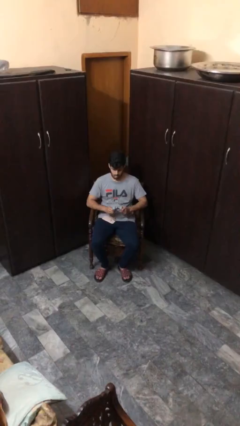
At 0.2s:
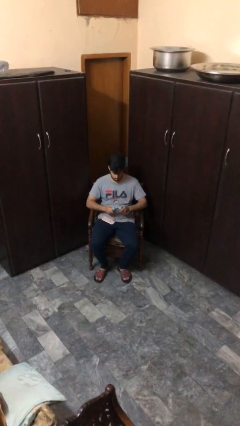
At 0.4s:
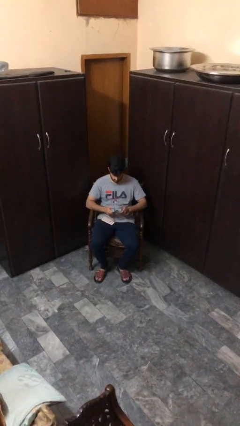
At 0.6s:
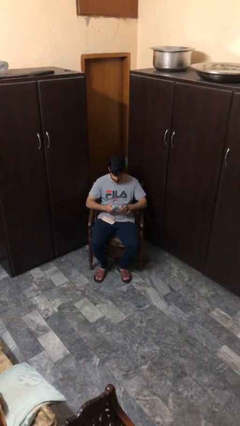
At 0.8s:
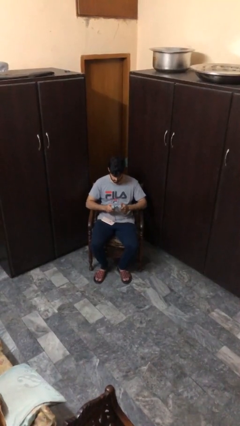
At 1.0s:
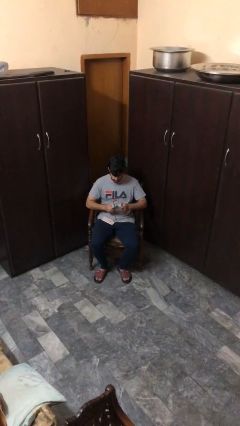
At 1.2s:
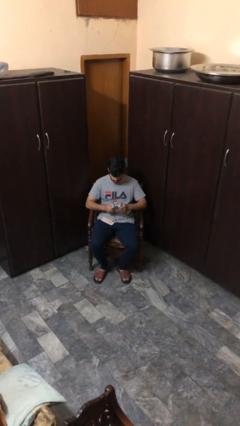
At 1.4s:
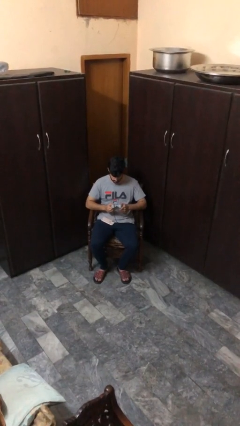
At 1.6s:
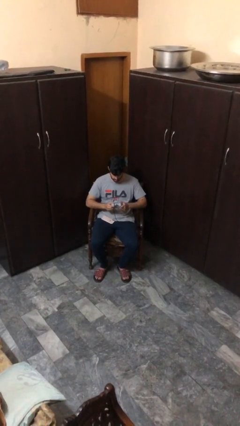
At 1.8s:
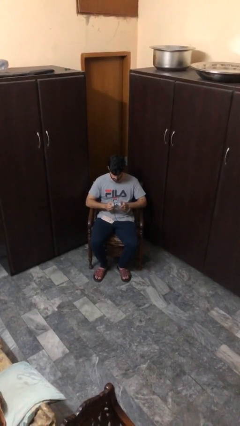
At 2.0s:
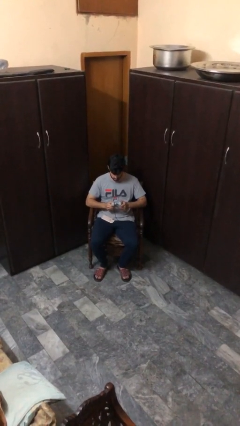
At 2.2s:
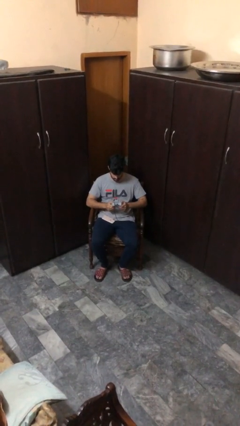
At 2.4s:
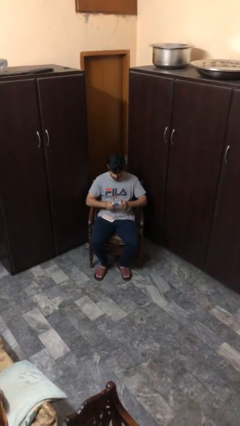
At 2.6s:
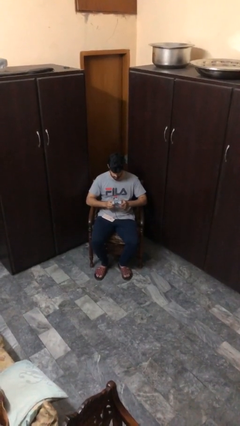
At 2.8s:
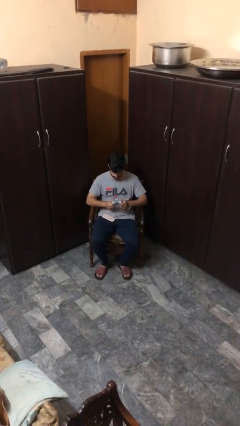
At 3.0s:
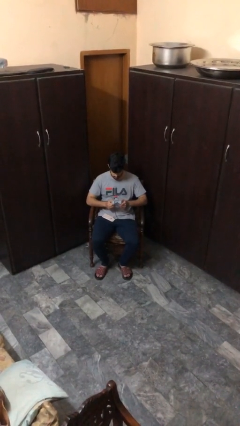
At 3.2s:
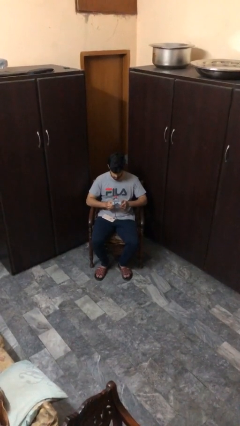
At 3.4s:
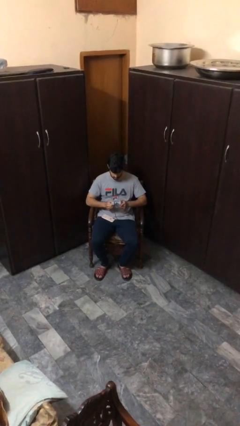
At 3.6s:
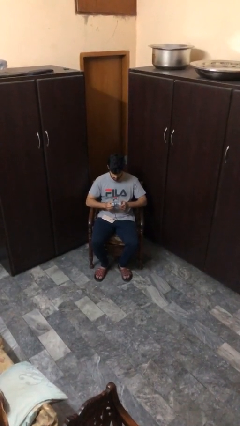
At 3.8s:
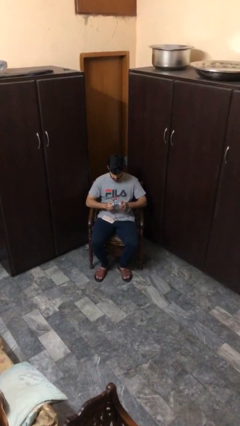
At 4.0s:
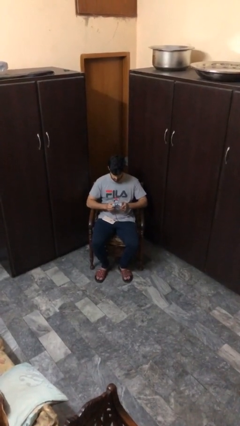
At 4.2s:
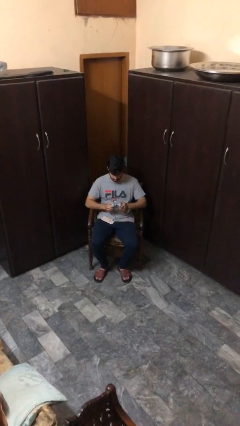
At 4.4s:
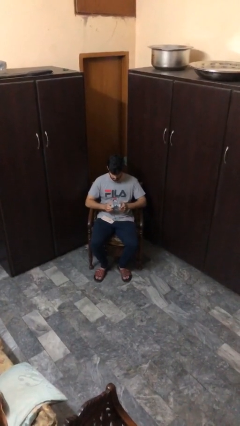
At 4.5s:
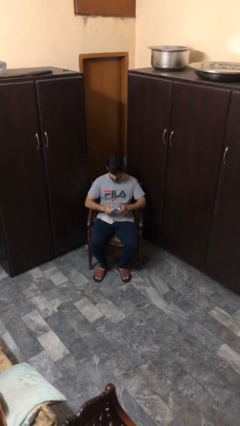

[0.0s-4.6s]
person interacts with handheld game

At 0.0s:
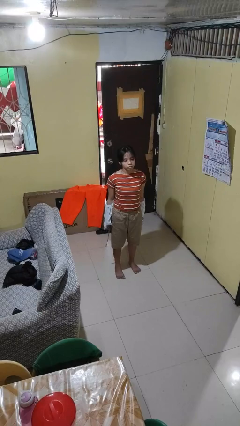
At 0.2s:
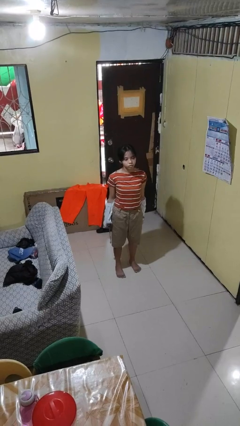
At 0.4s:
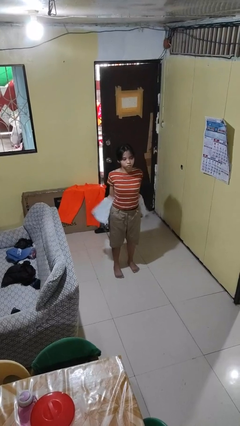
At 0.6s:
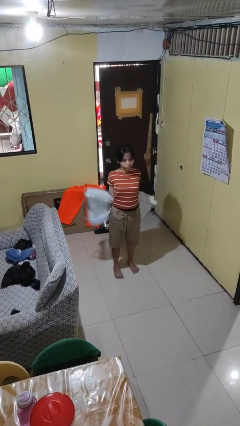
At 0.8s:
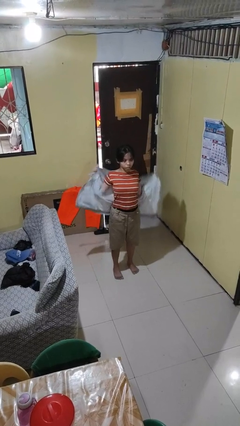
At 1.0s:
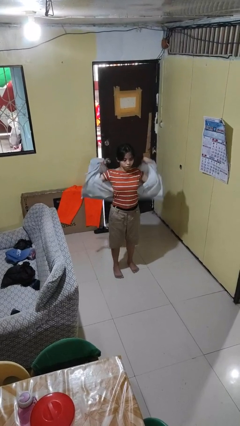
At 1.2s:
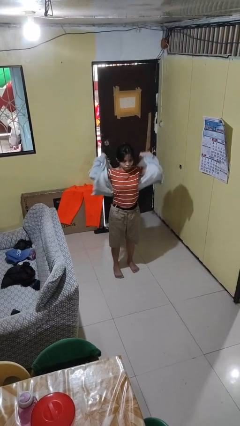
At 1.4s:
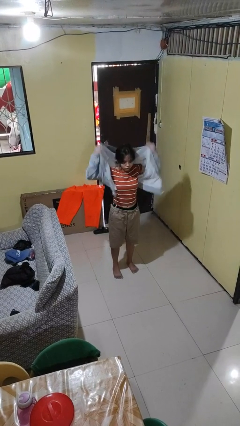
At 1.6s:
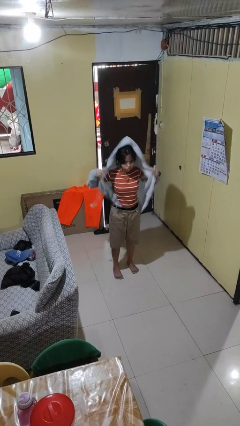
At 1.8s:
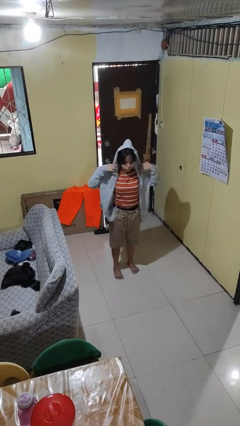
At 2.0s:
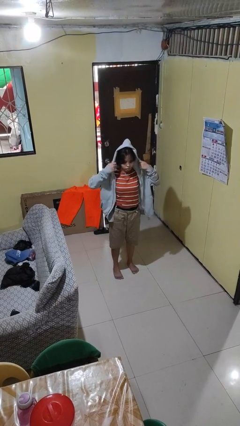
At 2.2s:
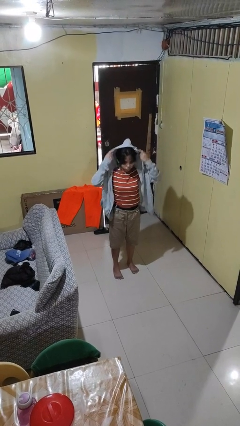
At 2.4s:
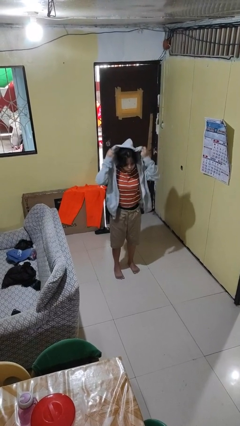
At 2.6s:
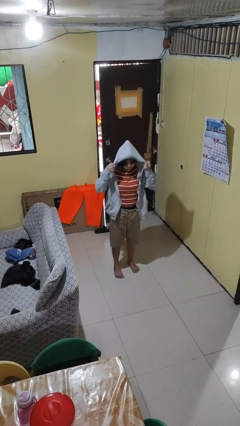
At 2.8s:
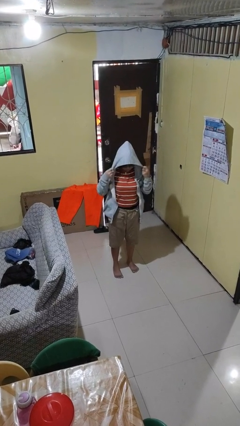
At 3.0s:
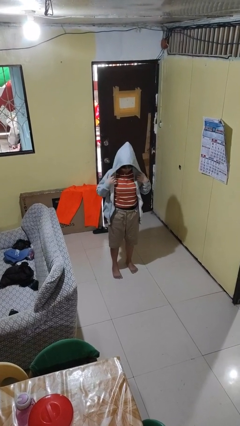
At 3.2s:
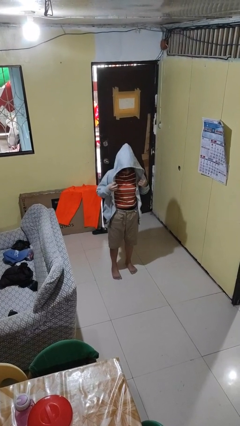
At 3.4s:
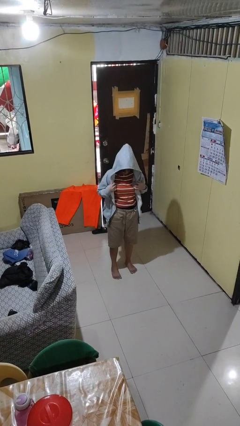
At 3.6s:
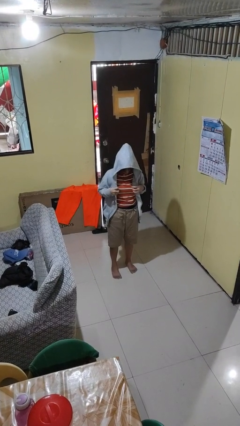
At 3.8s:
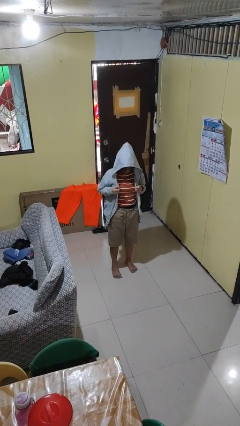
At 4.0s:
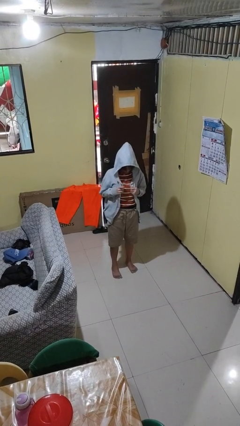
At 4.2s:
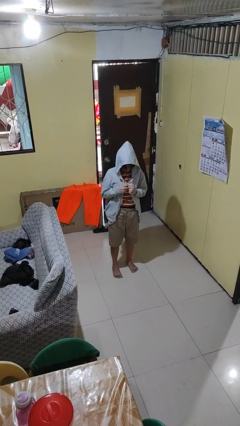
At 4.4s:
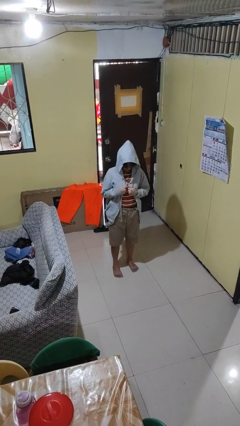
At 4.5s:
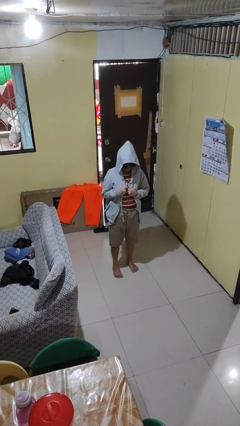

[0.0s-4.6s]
person puts on hoodie

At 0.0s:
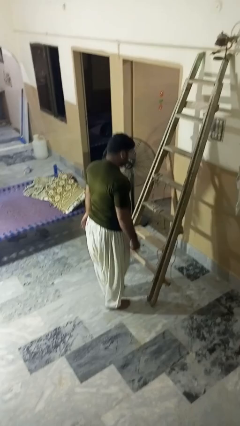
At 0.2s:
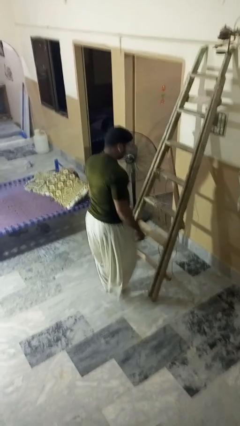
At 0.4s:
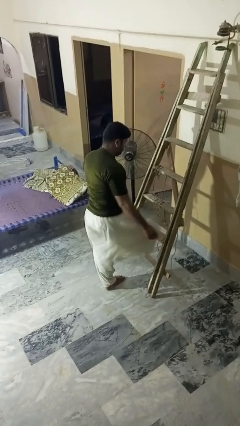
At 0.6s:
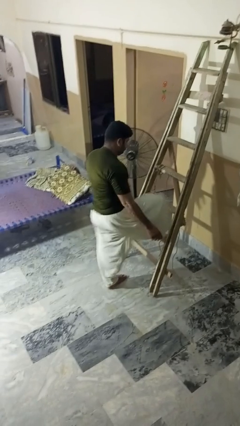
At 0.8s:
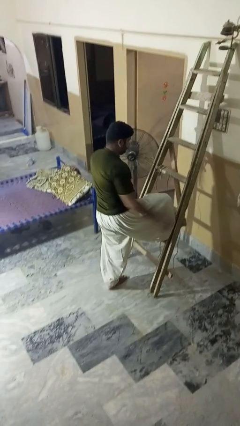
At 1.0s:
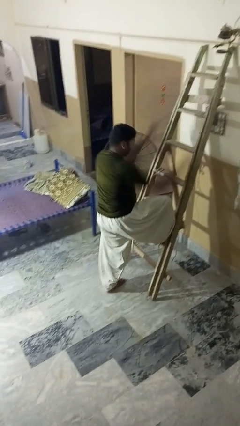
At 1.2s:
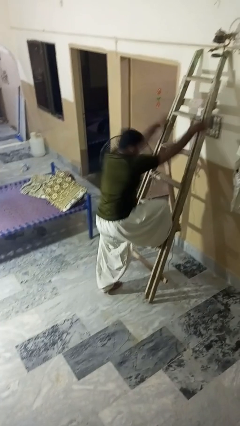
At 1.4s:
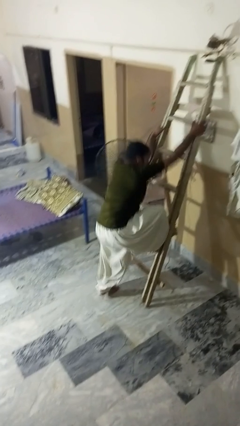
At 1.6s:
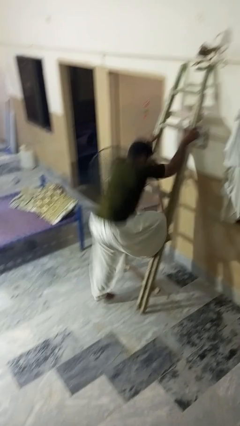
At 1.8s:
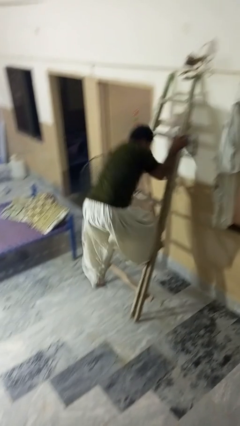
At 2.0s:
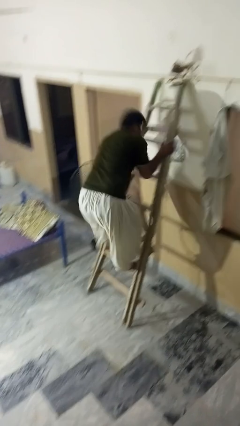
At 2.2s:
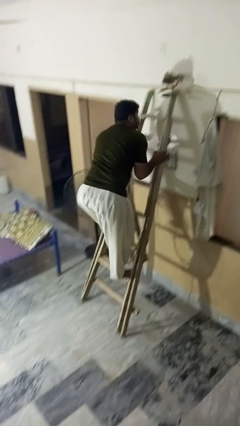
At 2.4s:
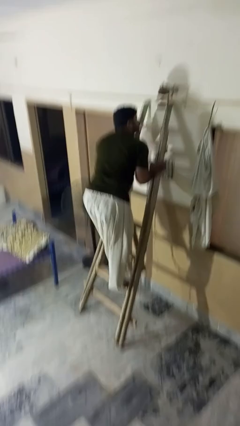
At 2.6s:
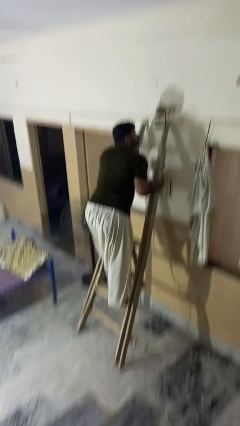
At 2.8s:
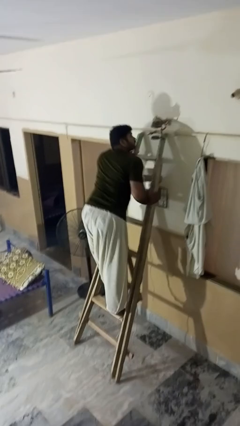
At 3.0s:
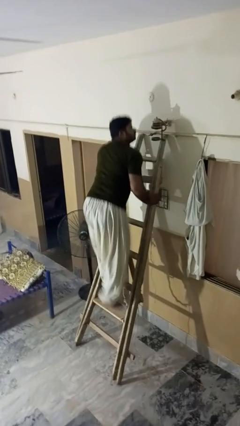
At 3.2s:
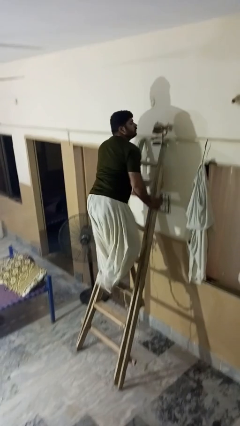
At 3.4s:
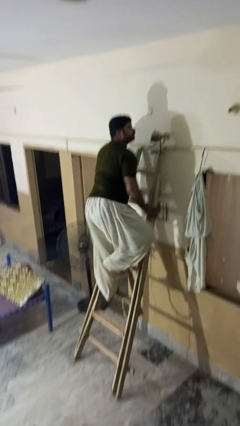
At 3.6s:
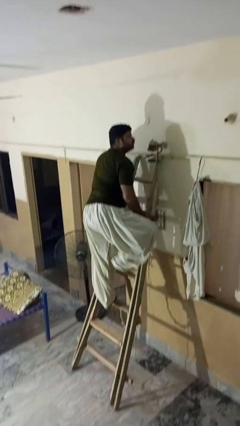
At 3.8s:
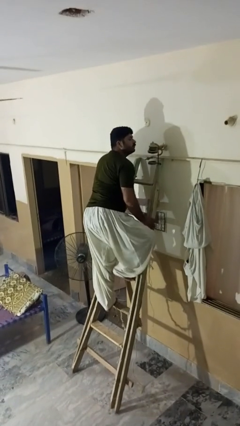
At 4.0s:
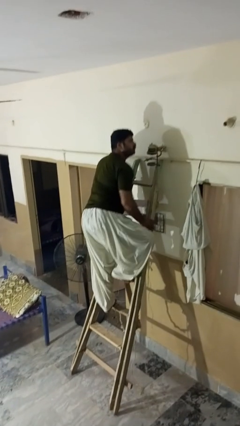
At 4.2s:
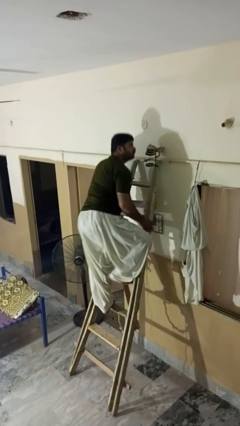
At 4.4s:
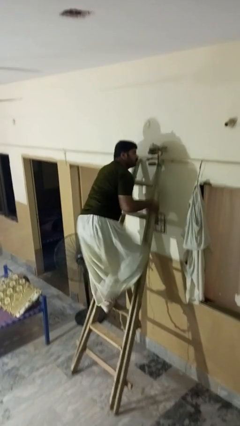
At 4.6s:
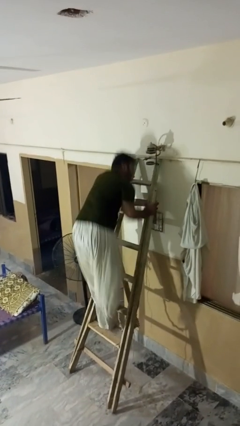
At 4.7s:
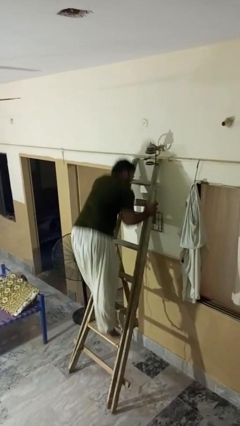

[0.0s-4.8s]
person climbs up ladder

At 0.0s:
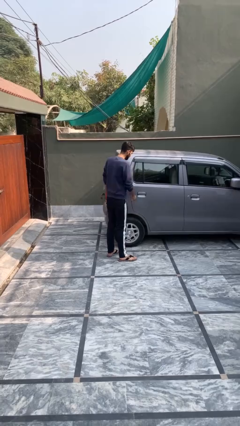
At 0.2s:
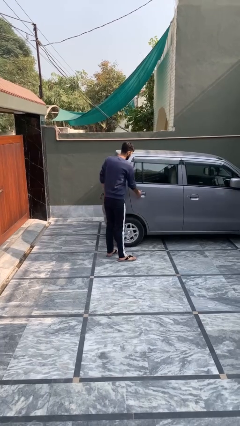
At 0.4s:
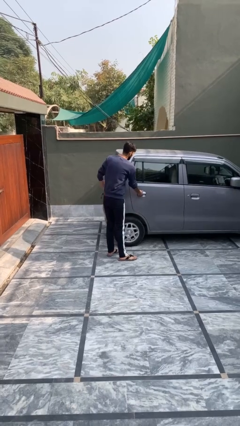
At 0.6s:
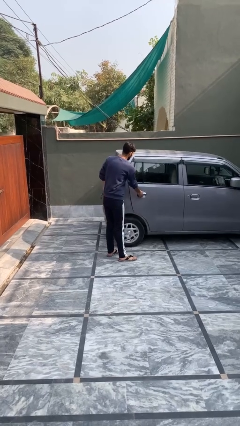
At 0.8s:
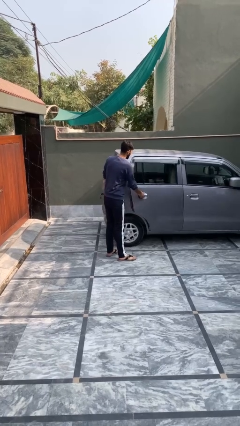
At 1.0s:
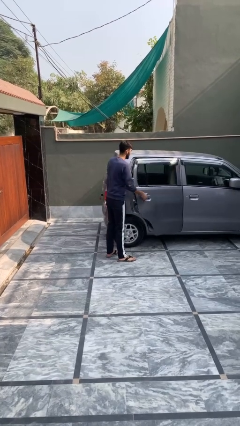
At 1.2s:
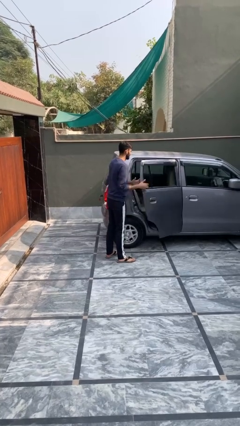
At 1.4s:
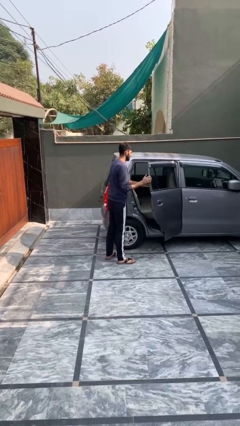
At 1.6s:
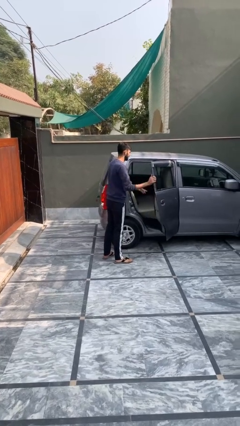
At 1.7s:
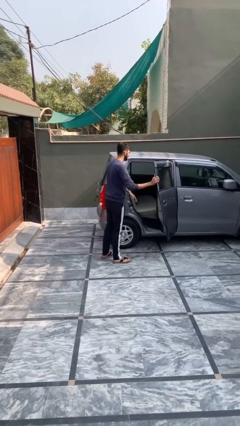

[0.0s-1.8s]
person opens car door

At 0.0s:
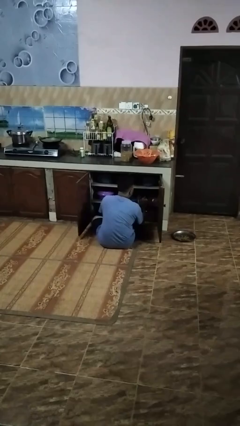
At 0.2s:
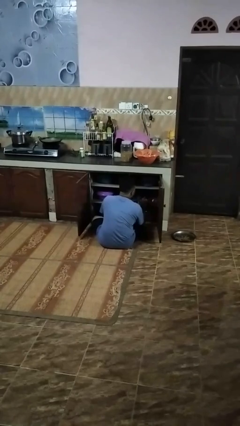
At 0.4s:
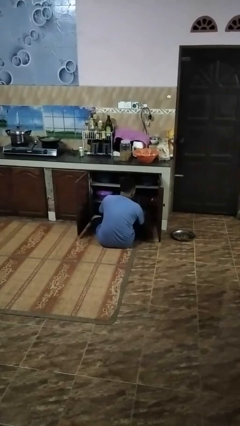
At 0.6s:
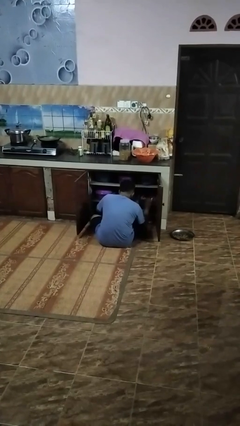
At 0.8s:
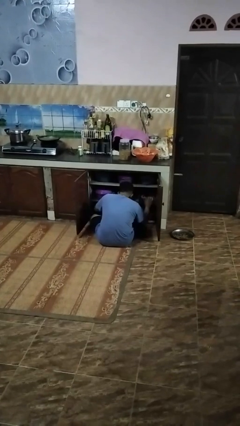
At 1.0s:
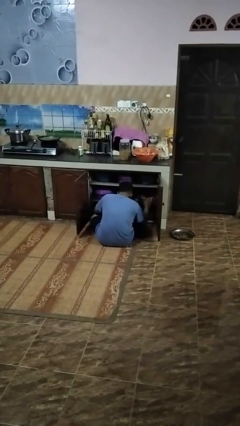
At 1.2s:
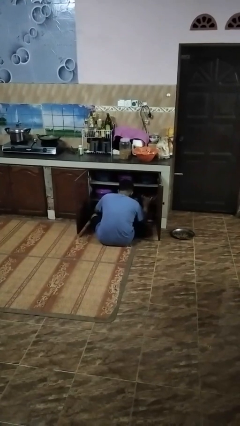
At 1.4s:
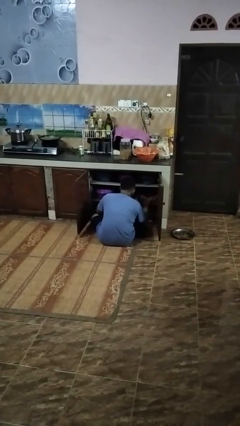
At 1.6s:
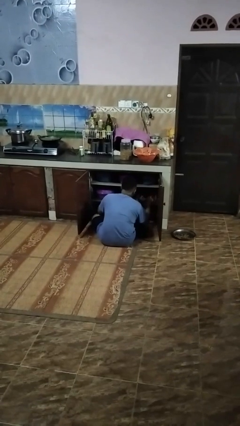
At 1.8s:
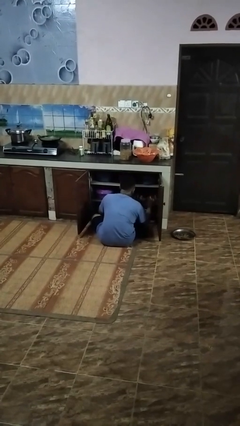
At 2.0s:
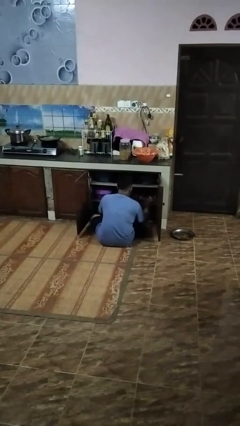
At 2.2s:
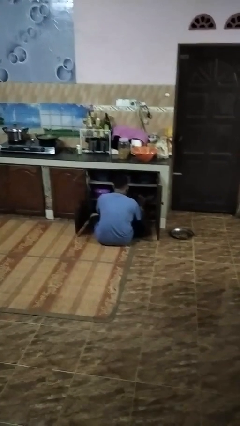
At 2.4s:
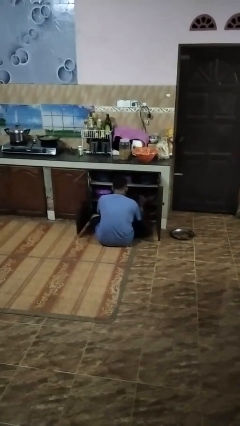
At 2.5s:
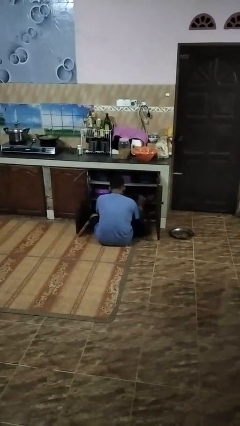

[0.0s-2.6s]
person searches in kitchen drawer
